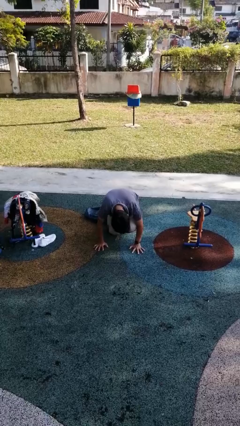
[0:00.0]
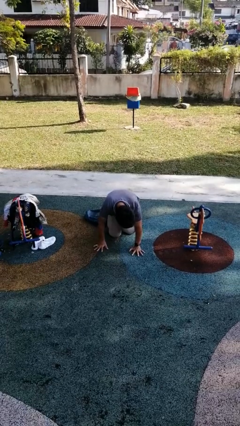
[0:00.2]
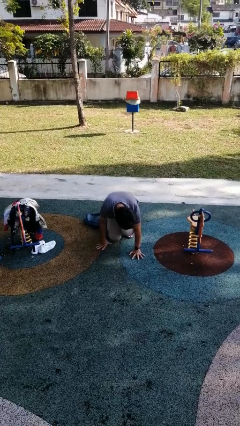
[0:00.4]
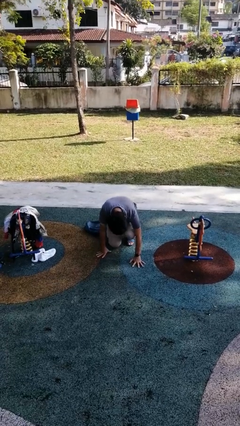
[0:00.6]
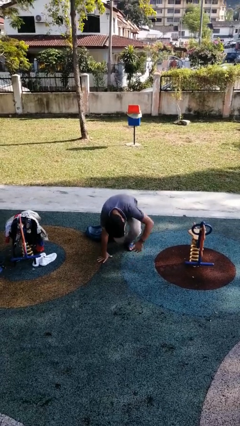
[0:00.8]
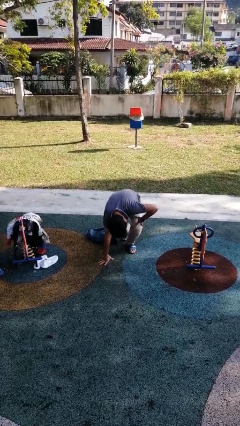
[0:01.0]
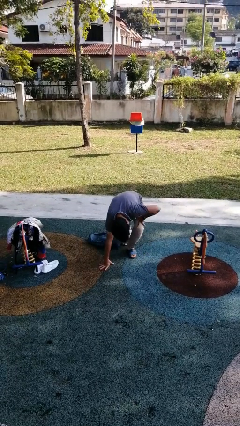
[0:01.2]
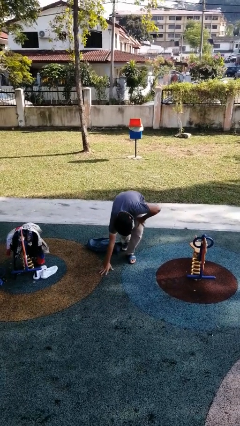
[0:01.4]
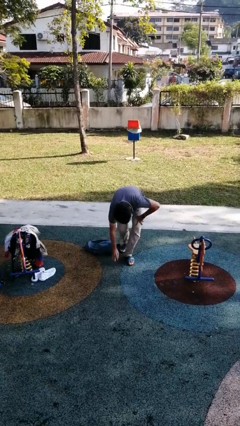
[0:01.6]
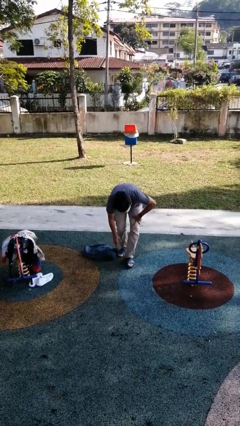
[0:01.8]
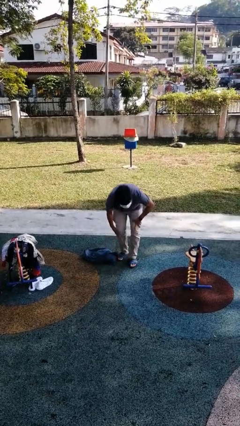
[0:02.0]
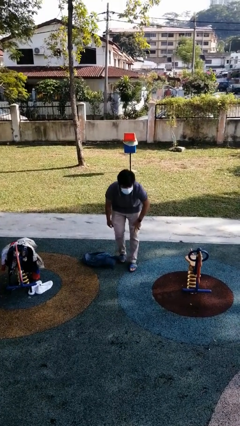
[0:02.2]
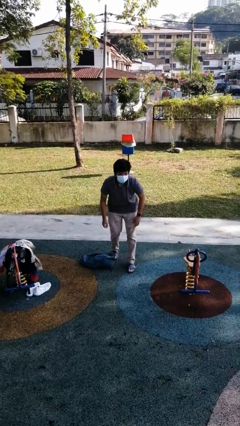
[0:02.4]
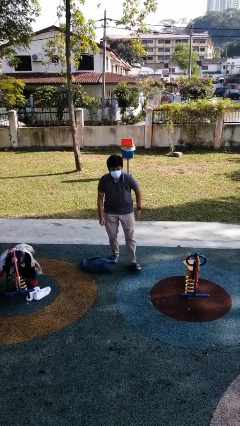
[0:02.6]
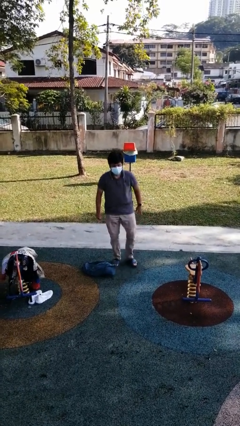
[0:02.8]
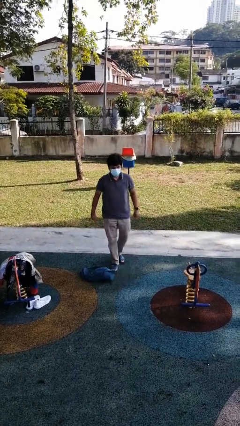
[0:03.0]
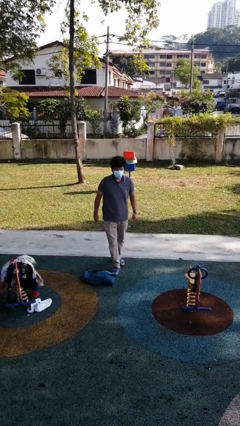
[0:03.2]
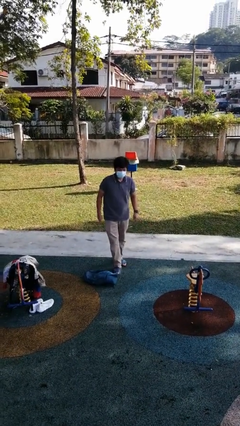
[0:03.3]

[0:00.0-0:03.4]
person stands up from floor

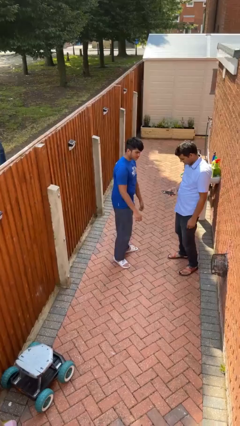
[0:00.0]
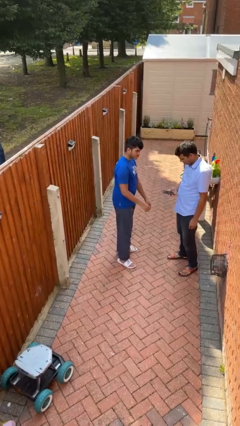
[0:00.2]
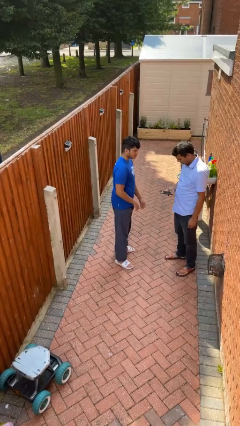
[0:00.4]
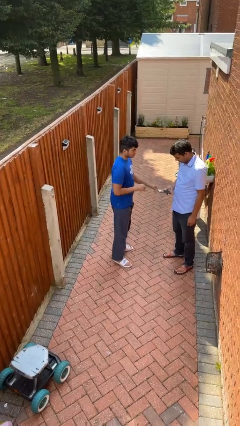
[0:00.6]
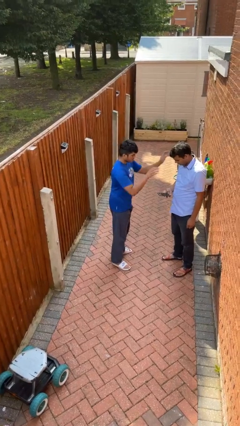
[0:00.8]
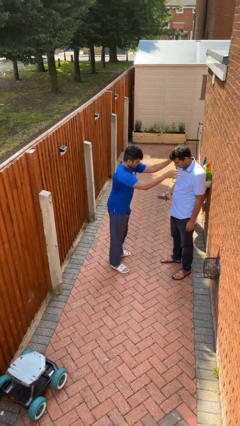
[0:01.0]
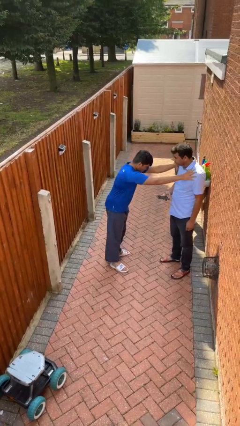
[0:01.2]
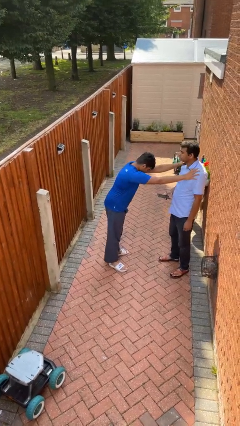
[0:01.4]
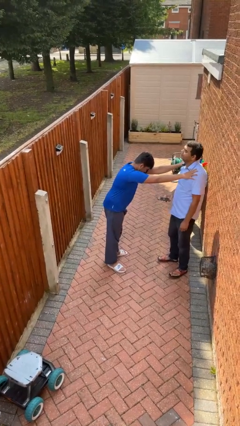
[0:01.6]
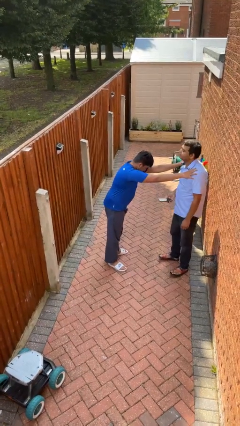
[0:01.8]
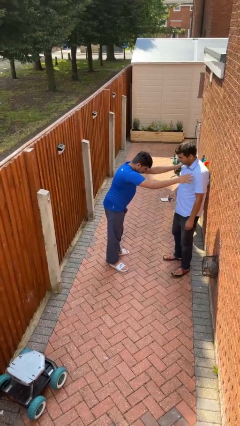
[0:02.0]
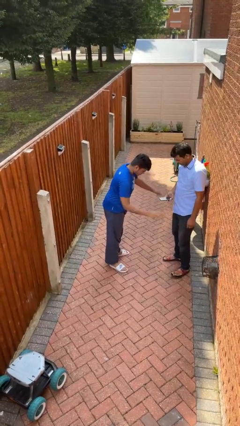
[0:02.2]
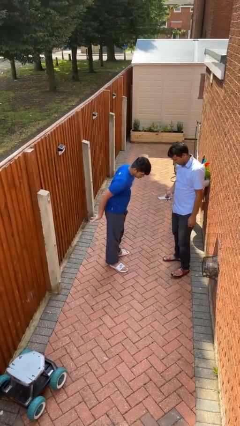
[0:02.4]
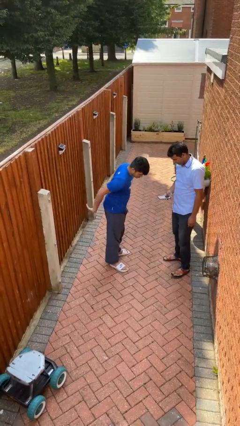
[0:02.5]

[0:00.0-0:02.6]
person shoves person

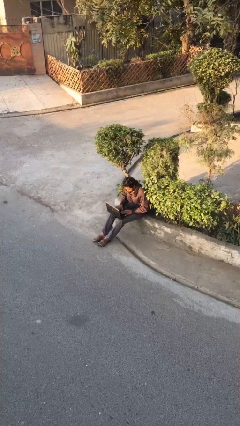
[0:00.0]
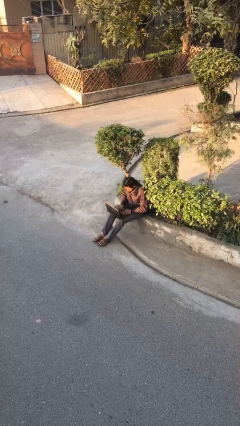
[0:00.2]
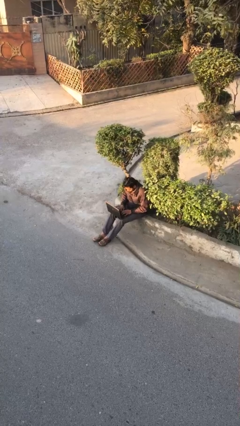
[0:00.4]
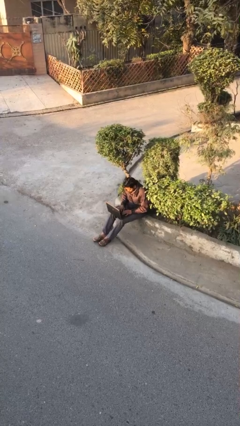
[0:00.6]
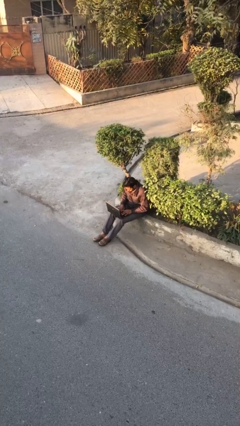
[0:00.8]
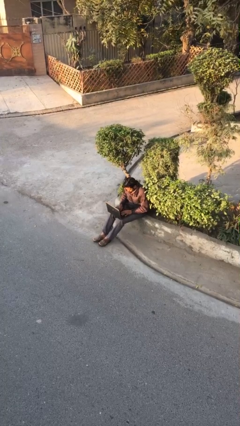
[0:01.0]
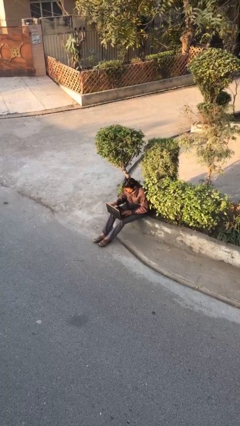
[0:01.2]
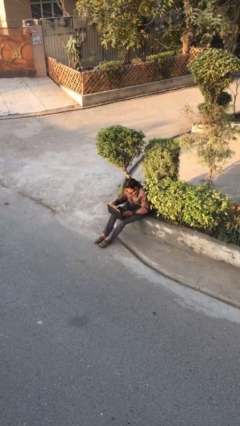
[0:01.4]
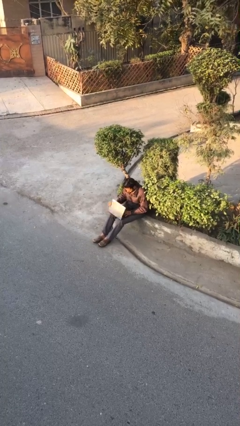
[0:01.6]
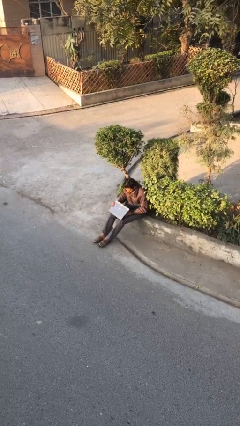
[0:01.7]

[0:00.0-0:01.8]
person interacts with laptop

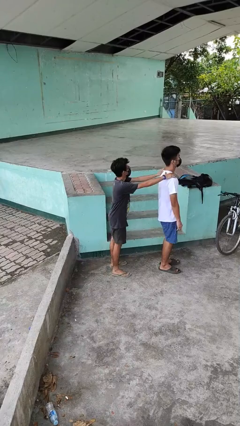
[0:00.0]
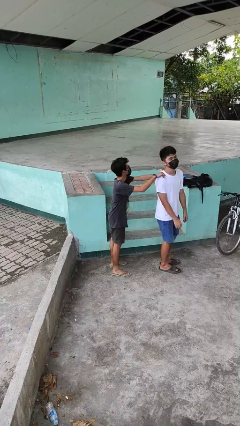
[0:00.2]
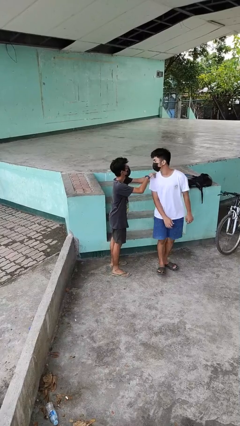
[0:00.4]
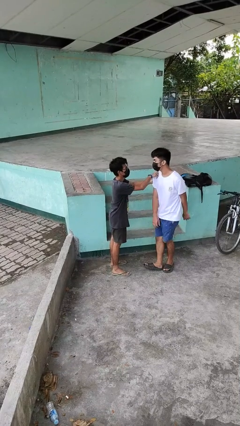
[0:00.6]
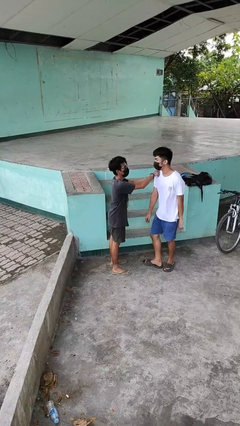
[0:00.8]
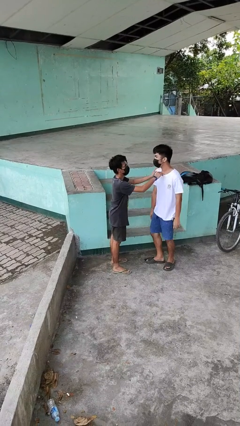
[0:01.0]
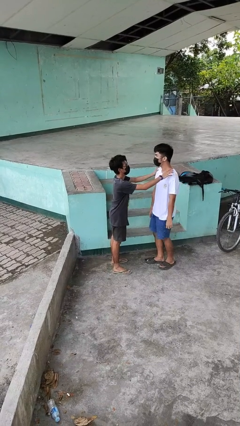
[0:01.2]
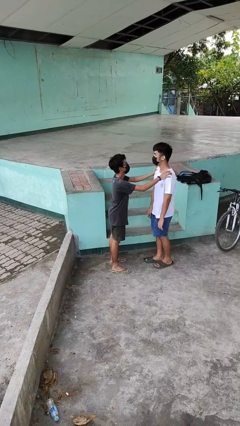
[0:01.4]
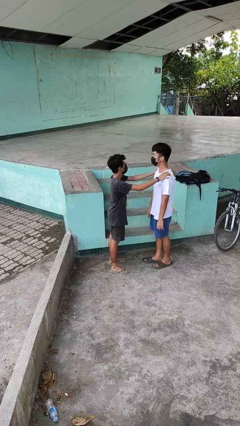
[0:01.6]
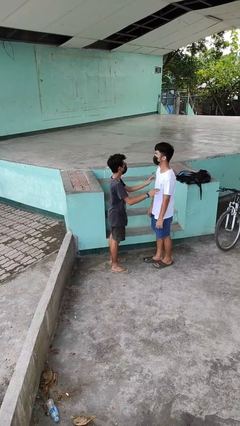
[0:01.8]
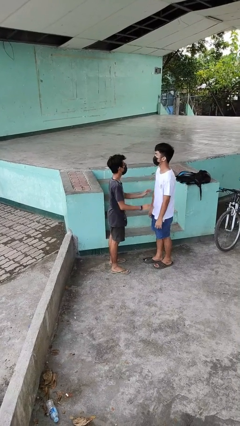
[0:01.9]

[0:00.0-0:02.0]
person spins person around

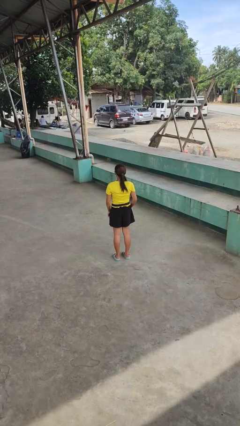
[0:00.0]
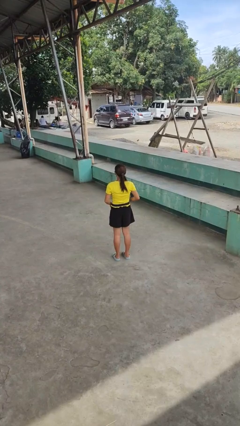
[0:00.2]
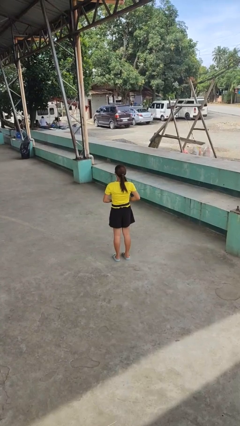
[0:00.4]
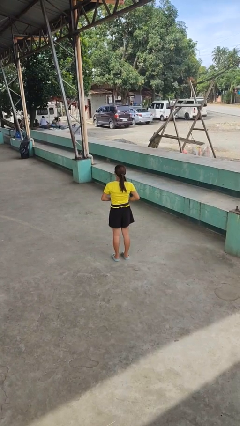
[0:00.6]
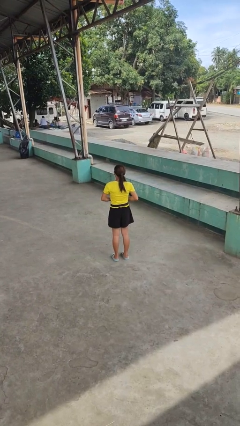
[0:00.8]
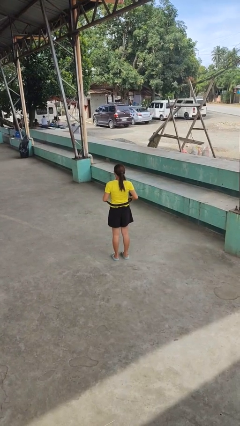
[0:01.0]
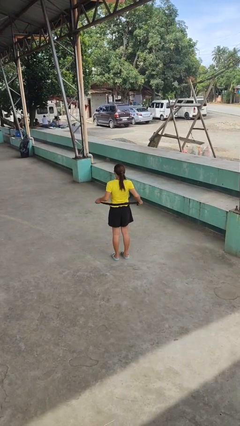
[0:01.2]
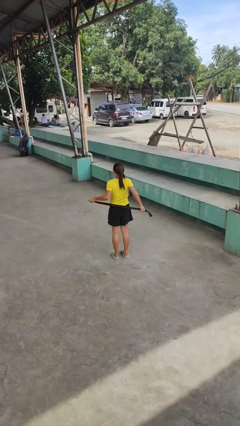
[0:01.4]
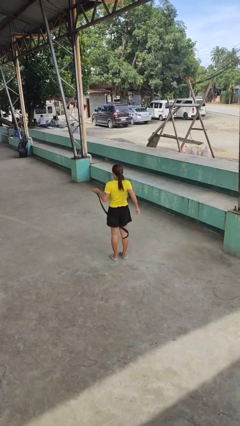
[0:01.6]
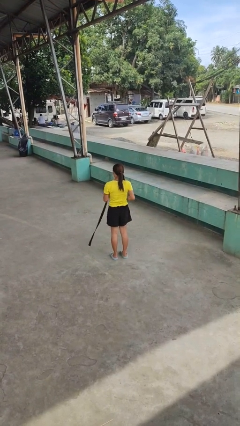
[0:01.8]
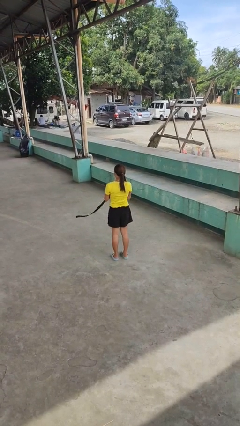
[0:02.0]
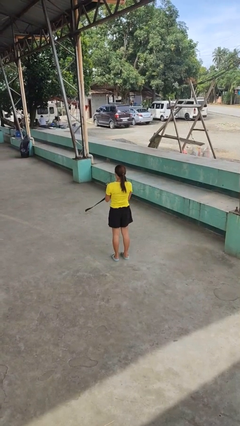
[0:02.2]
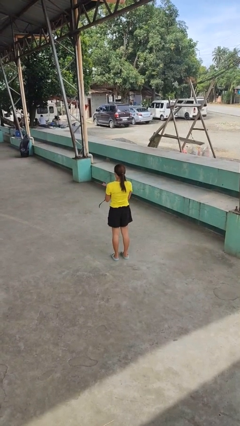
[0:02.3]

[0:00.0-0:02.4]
person takes off belt

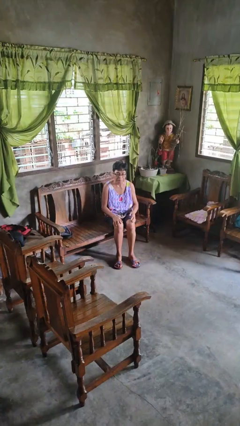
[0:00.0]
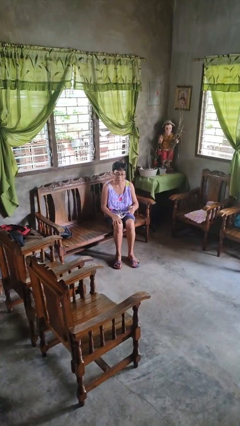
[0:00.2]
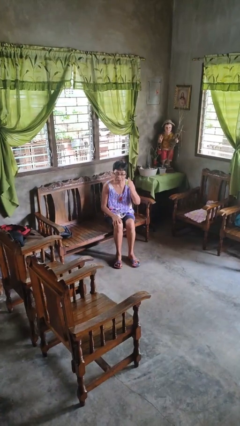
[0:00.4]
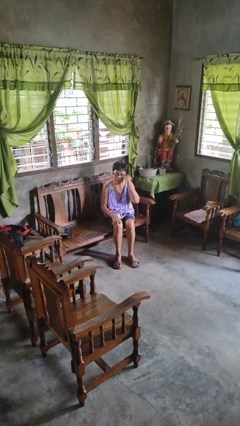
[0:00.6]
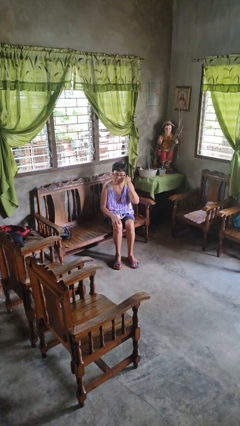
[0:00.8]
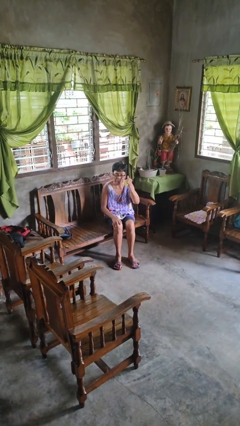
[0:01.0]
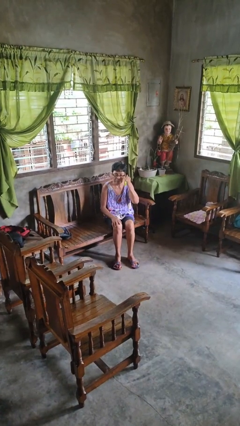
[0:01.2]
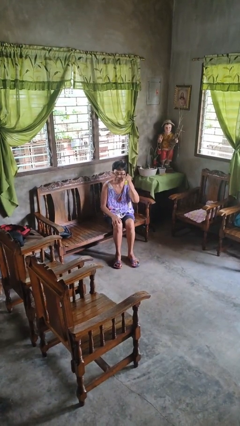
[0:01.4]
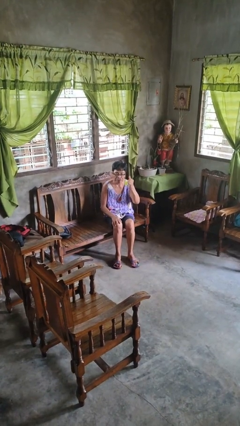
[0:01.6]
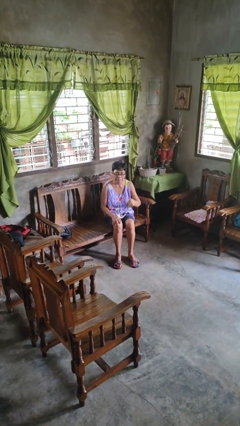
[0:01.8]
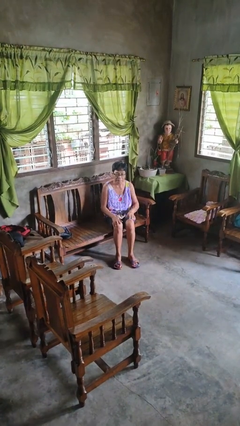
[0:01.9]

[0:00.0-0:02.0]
person gestures behind me

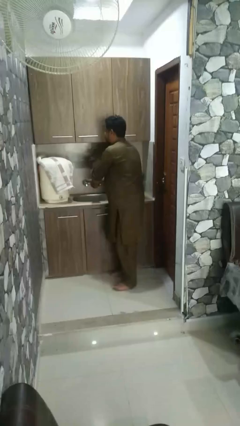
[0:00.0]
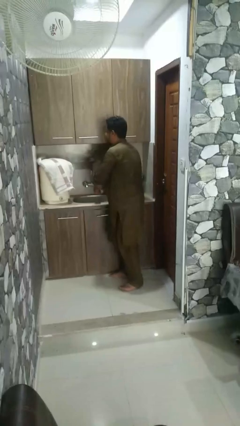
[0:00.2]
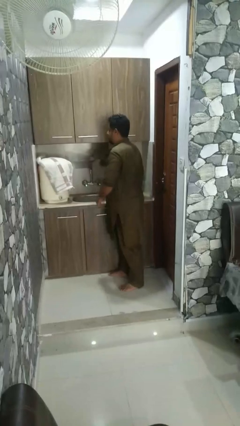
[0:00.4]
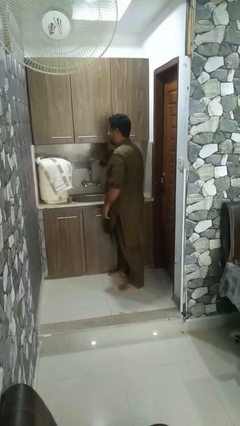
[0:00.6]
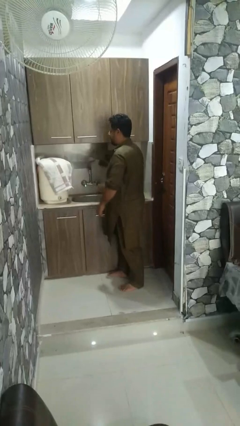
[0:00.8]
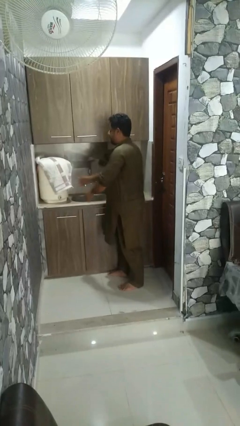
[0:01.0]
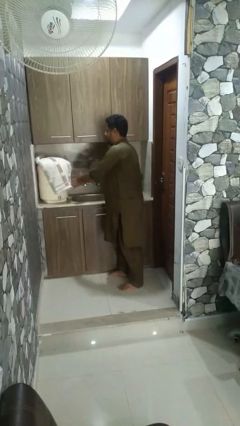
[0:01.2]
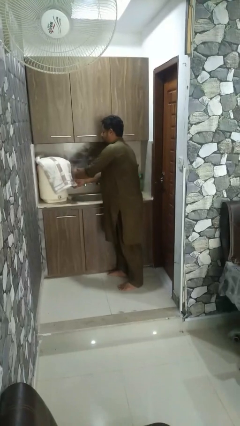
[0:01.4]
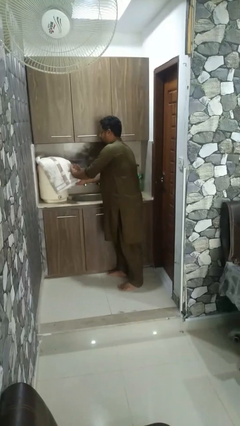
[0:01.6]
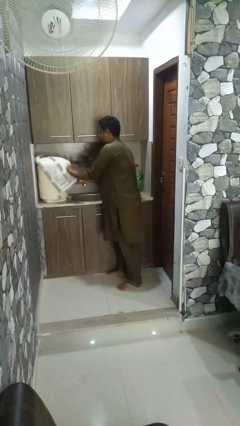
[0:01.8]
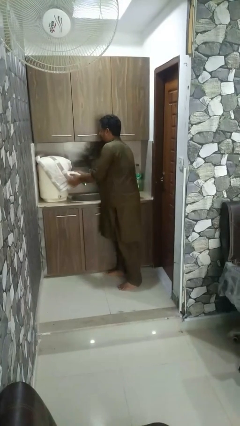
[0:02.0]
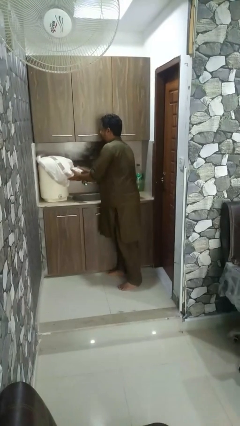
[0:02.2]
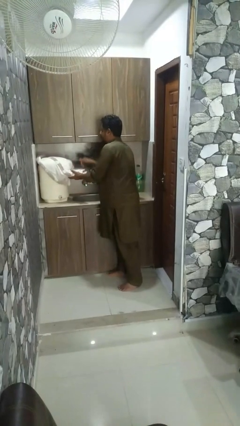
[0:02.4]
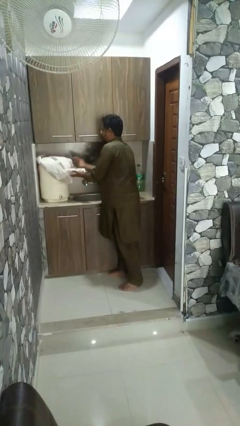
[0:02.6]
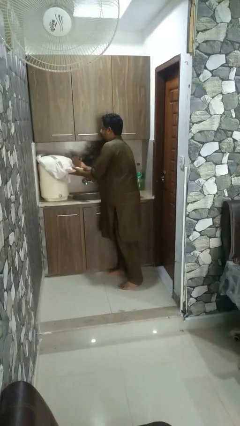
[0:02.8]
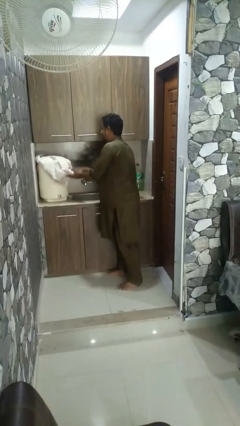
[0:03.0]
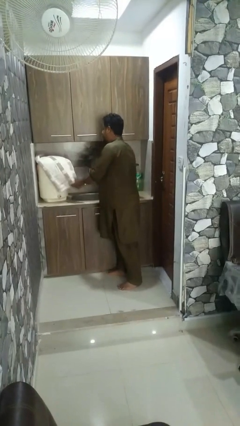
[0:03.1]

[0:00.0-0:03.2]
person dries hands with towel
